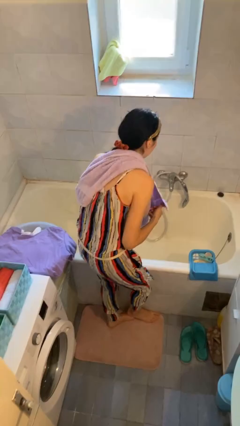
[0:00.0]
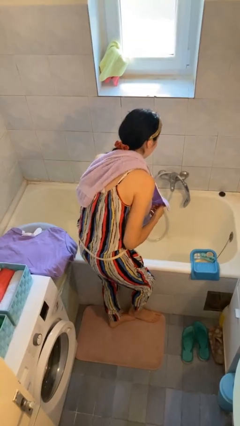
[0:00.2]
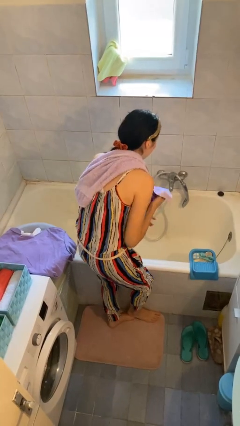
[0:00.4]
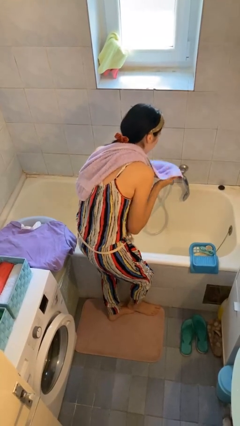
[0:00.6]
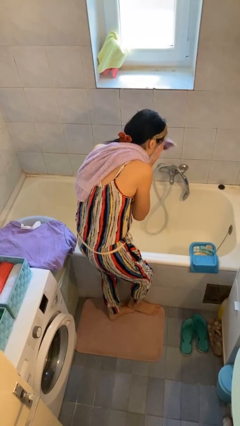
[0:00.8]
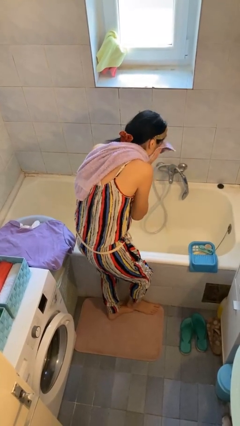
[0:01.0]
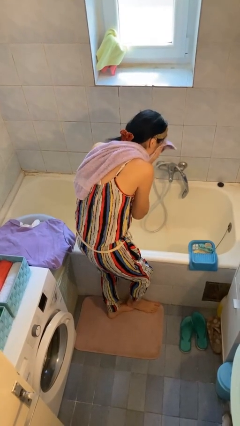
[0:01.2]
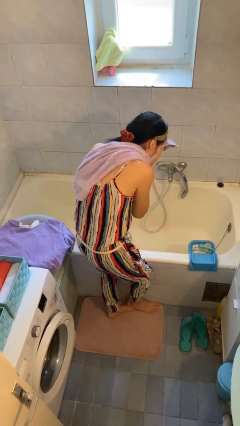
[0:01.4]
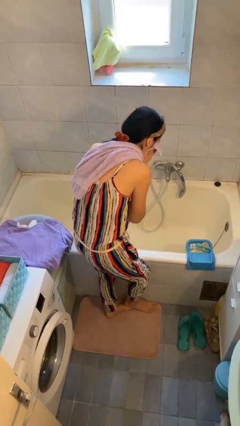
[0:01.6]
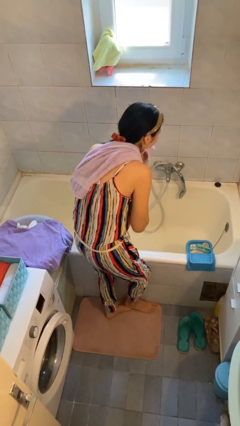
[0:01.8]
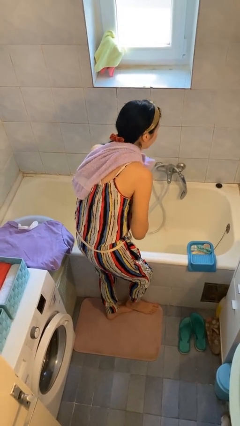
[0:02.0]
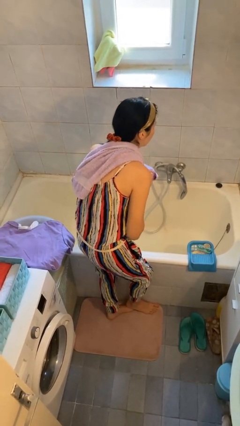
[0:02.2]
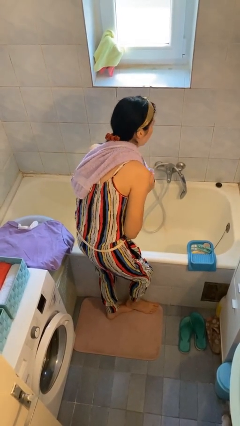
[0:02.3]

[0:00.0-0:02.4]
person dries face with towel

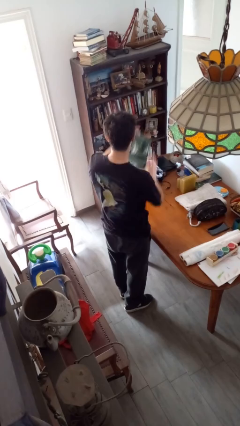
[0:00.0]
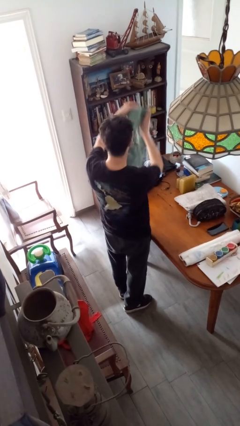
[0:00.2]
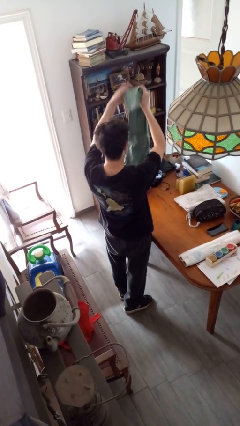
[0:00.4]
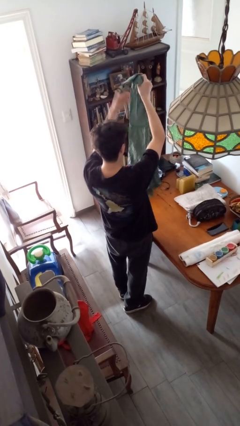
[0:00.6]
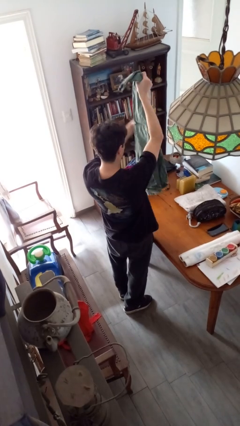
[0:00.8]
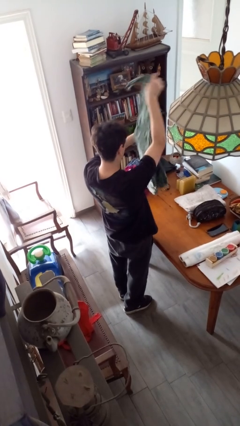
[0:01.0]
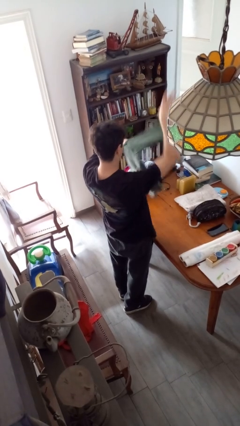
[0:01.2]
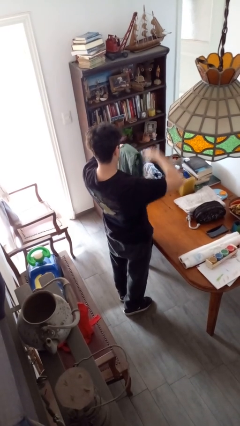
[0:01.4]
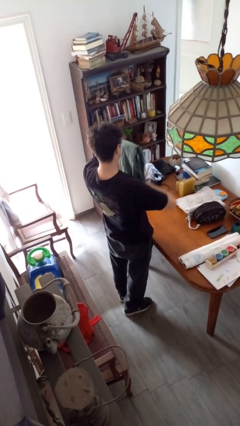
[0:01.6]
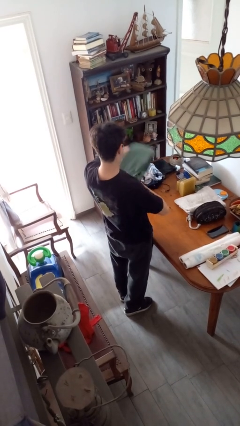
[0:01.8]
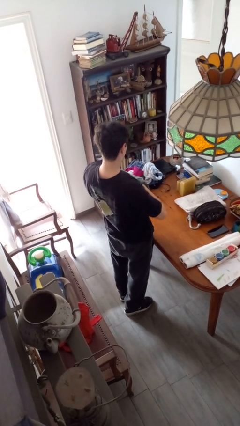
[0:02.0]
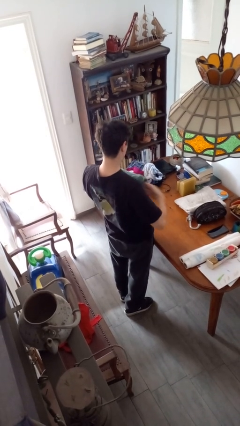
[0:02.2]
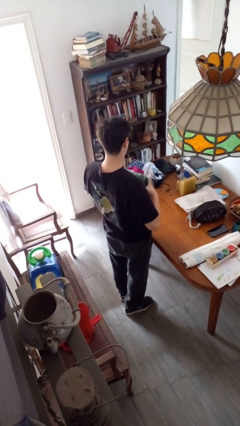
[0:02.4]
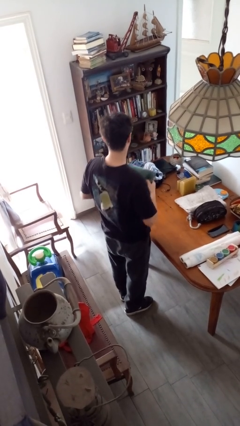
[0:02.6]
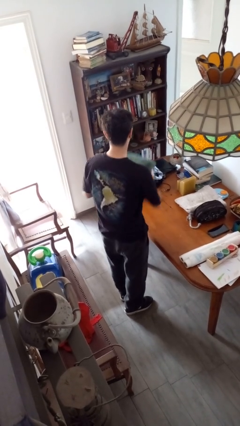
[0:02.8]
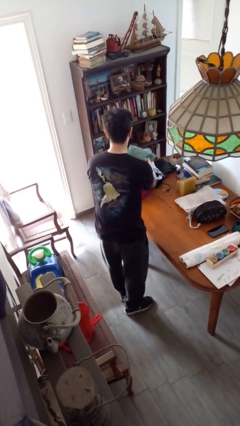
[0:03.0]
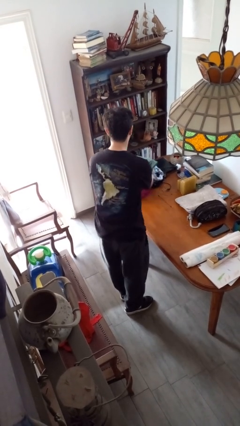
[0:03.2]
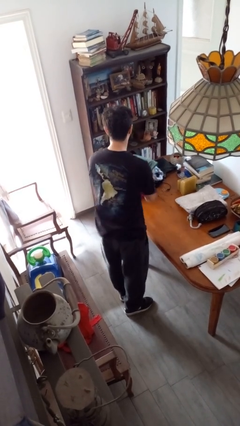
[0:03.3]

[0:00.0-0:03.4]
person folds shirt

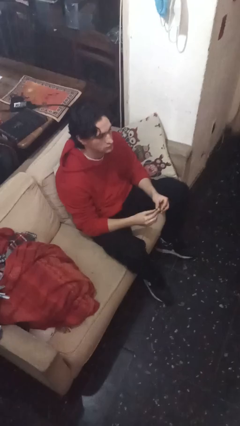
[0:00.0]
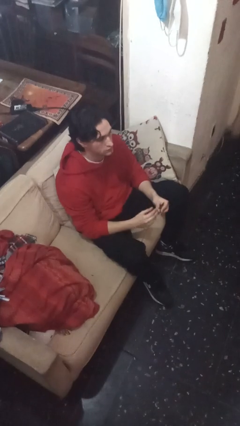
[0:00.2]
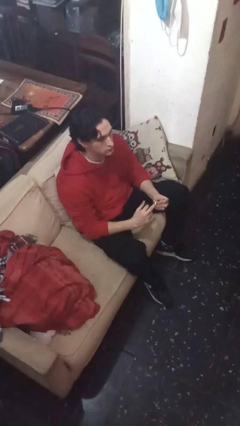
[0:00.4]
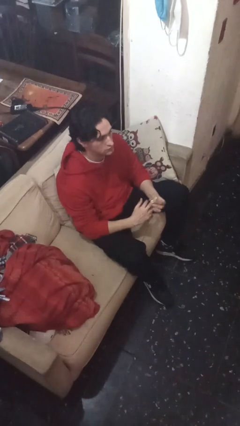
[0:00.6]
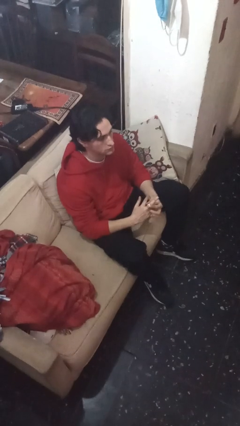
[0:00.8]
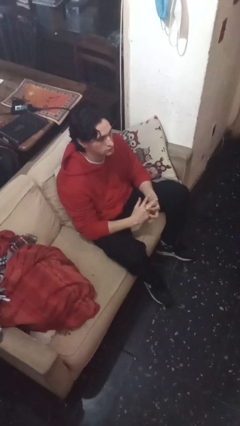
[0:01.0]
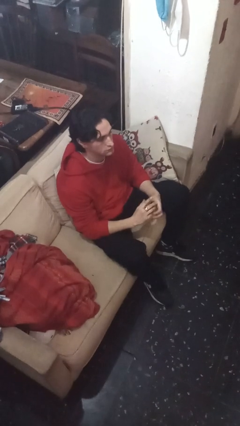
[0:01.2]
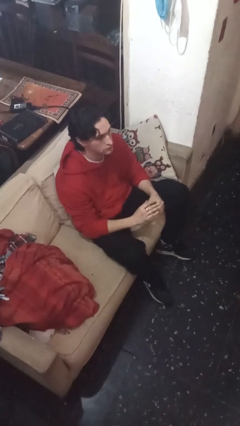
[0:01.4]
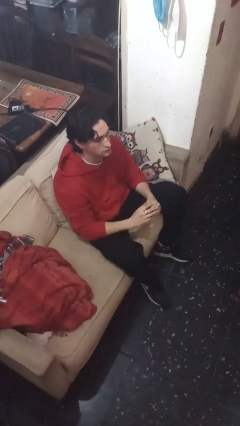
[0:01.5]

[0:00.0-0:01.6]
person puts on ring

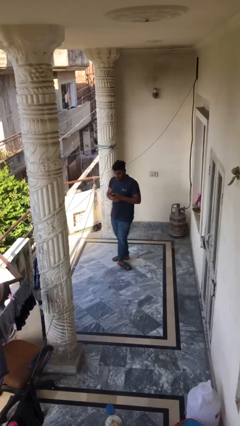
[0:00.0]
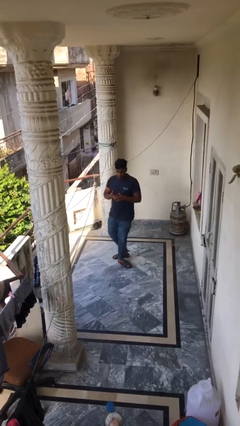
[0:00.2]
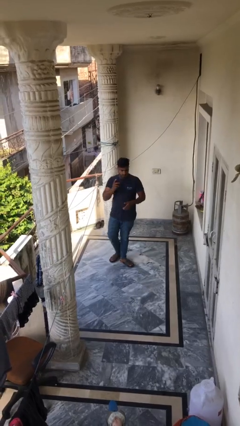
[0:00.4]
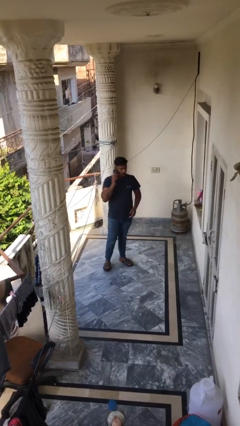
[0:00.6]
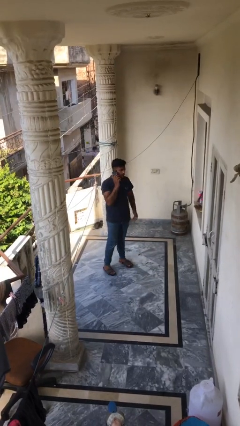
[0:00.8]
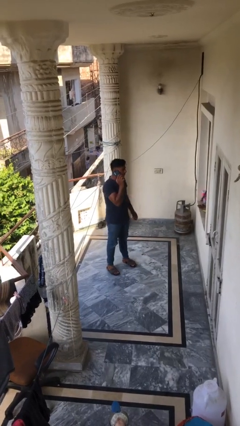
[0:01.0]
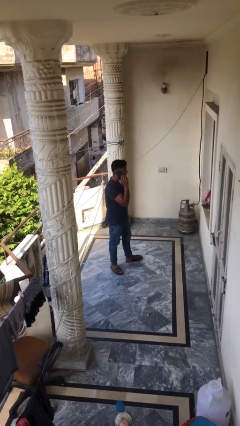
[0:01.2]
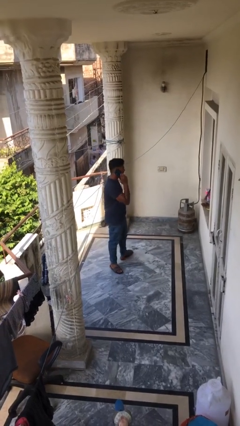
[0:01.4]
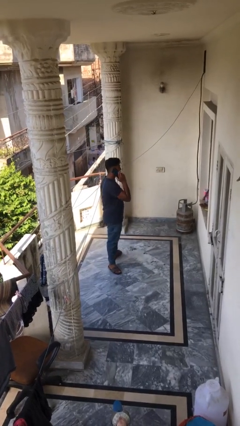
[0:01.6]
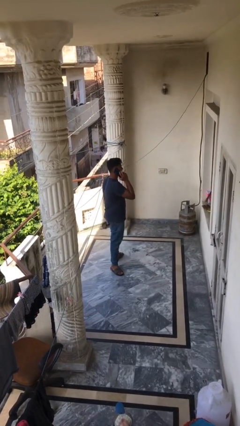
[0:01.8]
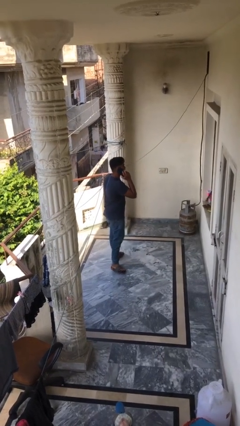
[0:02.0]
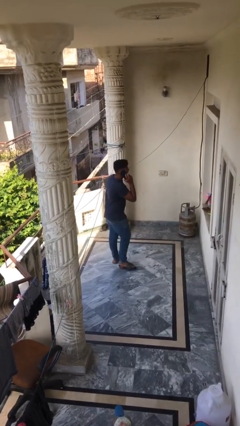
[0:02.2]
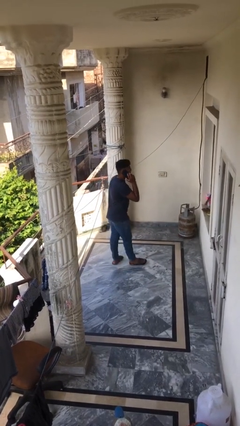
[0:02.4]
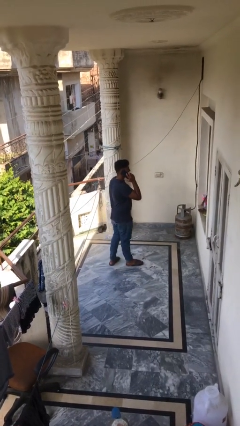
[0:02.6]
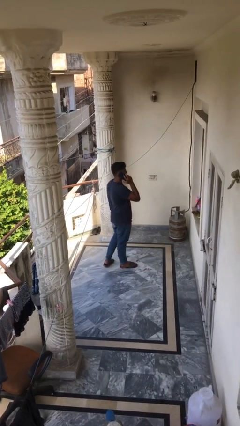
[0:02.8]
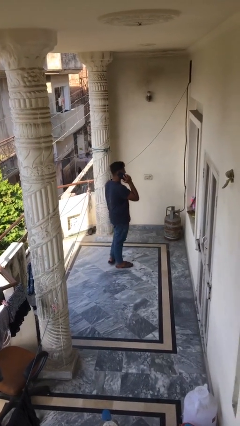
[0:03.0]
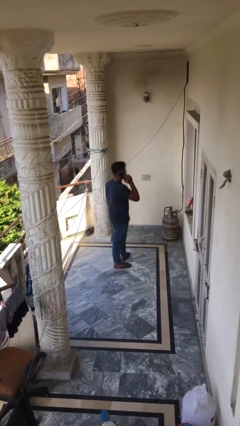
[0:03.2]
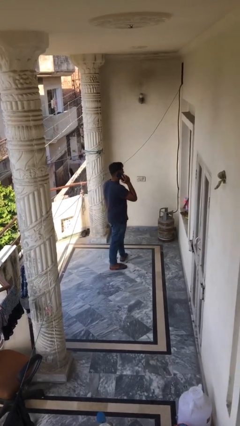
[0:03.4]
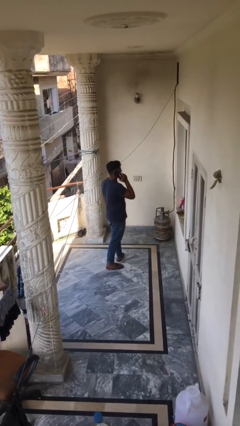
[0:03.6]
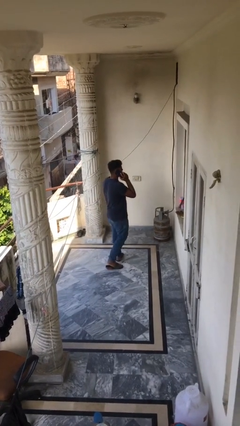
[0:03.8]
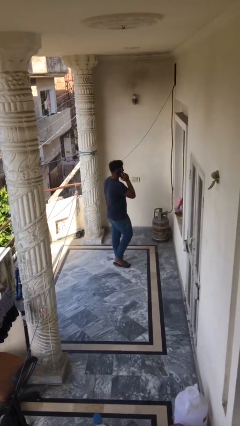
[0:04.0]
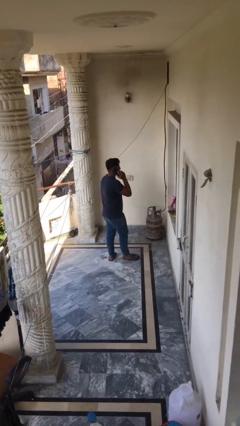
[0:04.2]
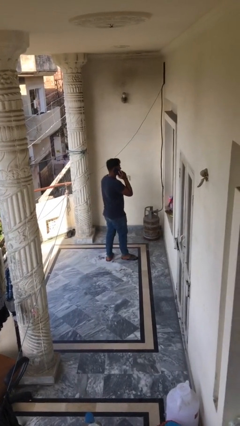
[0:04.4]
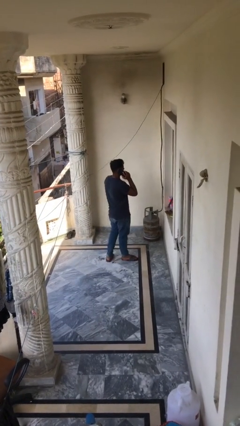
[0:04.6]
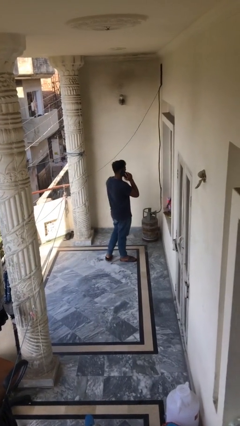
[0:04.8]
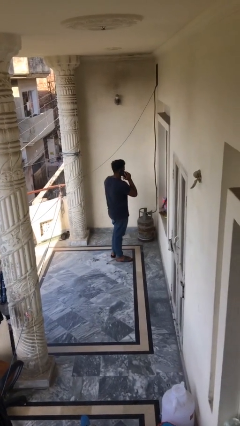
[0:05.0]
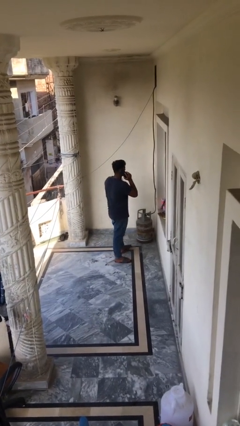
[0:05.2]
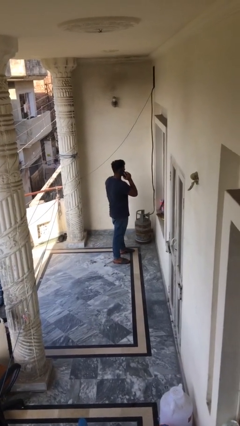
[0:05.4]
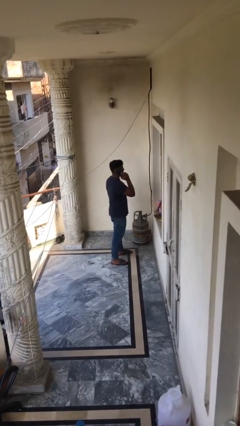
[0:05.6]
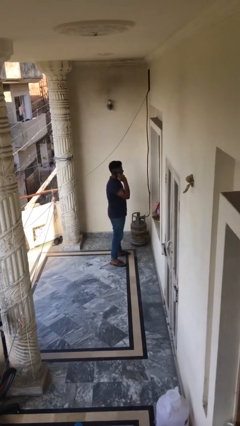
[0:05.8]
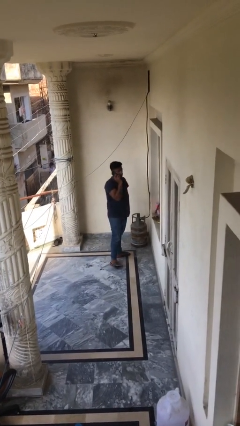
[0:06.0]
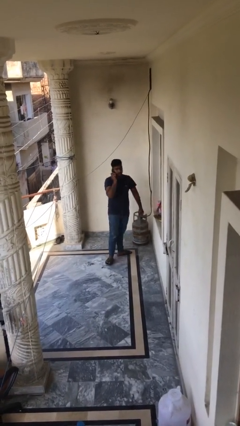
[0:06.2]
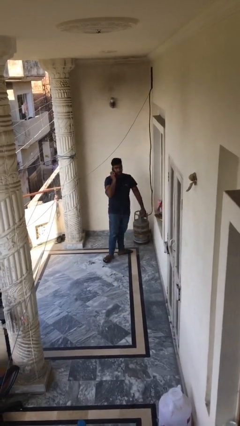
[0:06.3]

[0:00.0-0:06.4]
person talks on phone

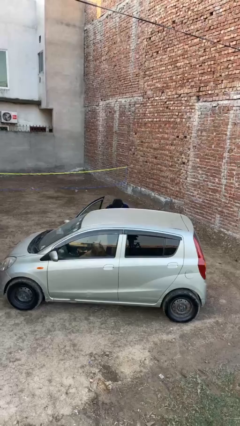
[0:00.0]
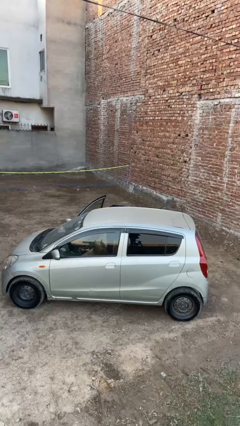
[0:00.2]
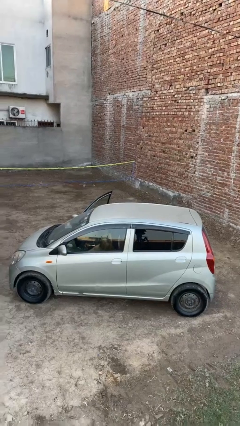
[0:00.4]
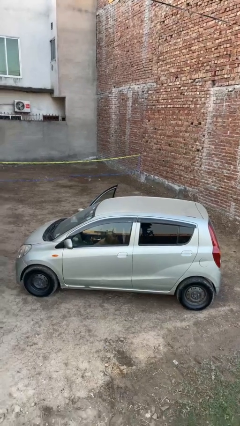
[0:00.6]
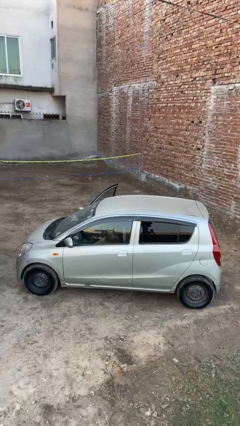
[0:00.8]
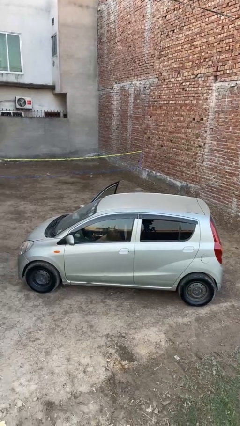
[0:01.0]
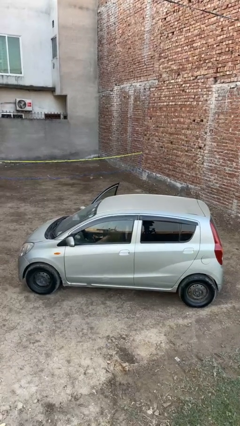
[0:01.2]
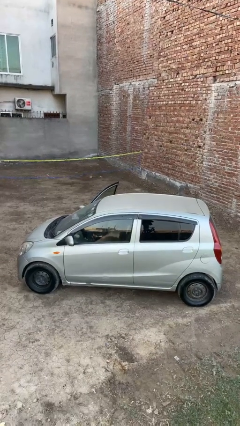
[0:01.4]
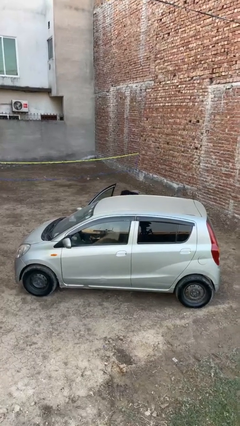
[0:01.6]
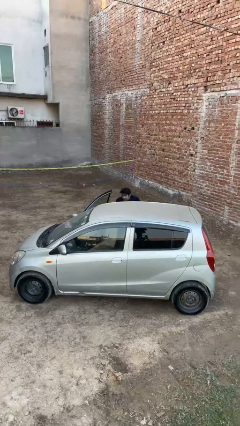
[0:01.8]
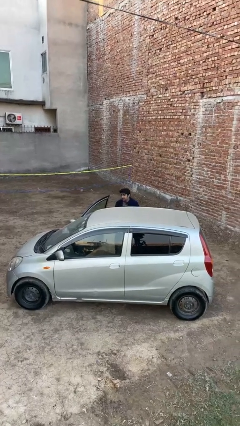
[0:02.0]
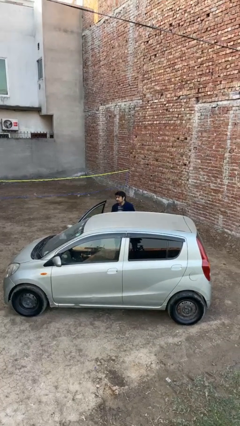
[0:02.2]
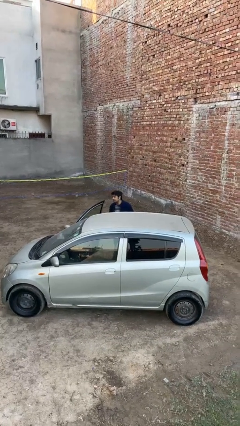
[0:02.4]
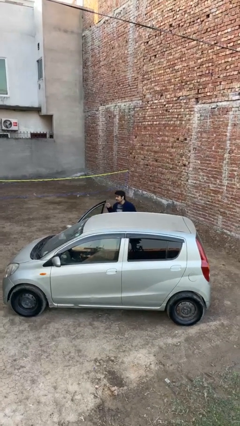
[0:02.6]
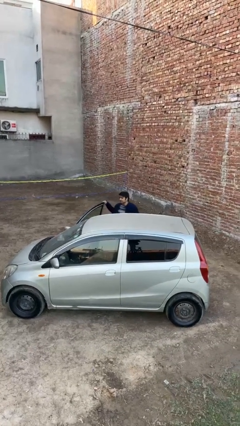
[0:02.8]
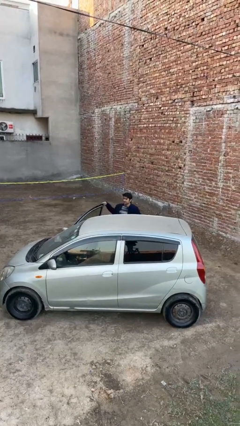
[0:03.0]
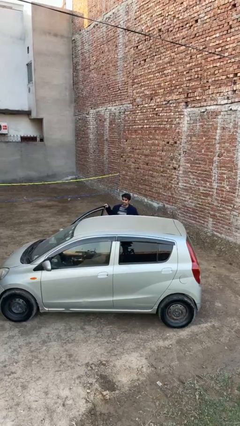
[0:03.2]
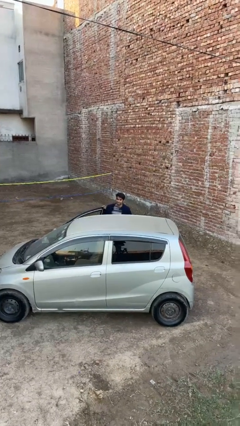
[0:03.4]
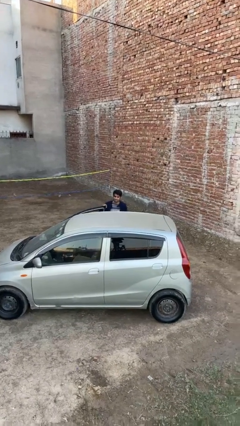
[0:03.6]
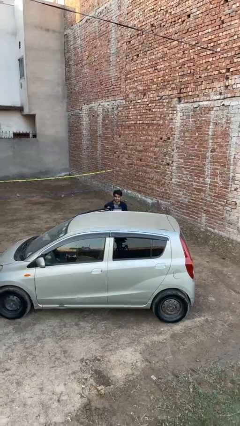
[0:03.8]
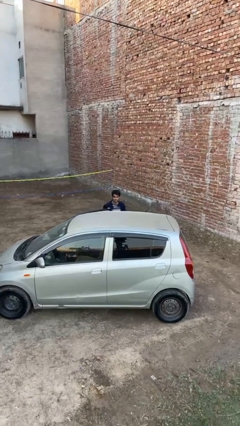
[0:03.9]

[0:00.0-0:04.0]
person unloads car
